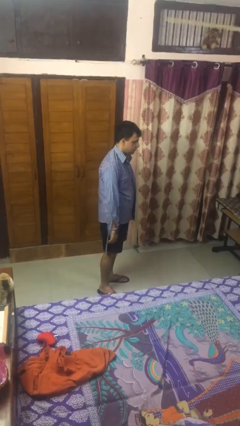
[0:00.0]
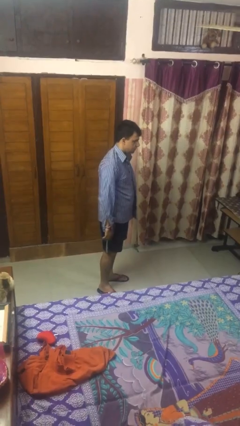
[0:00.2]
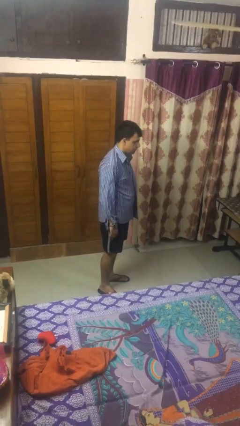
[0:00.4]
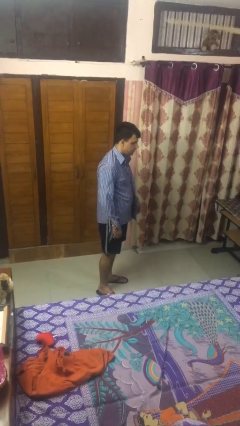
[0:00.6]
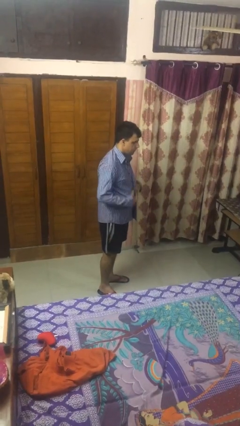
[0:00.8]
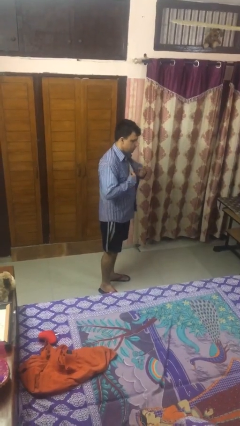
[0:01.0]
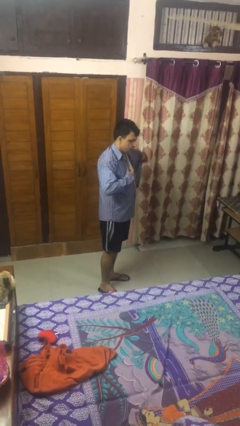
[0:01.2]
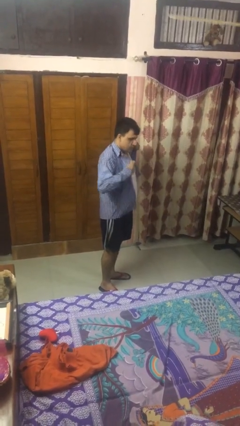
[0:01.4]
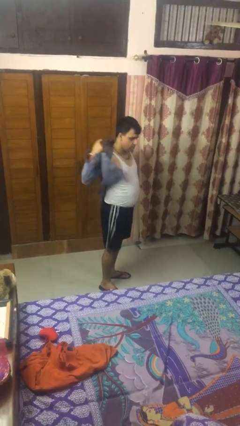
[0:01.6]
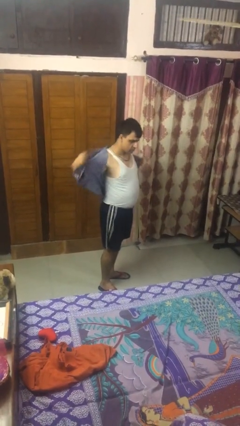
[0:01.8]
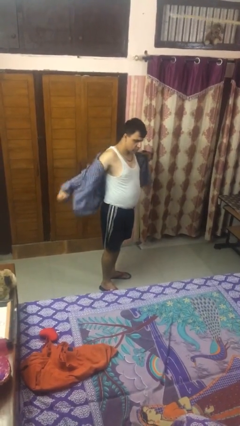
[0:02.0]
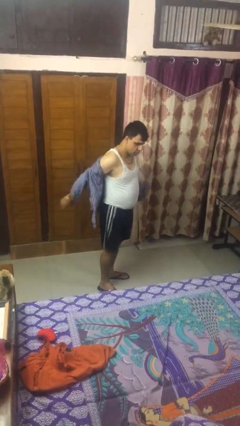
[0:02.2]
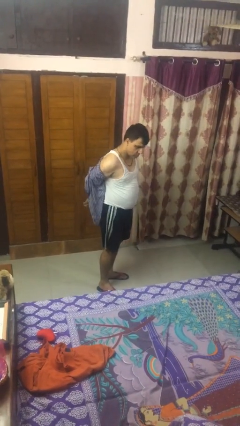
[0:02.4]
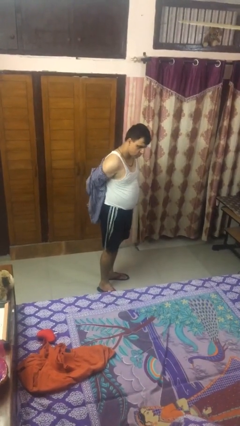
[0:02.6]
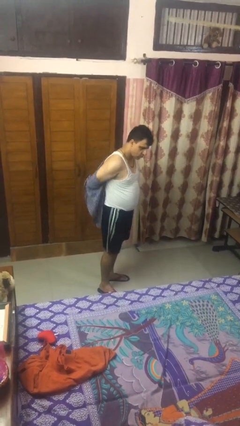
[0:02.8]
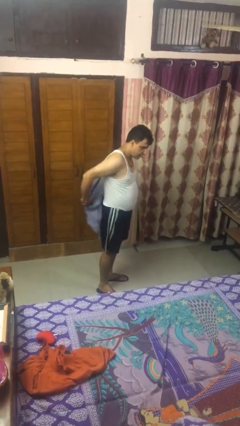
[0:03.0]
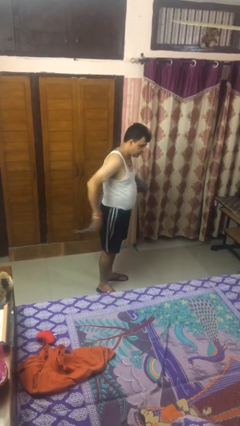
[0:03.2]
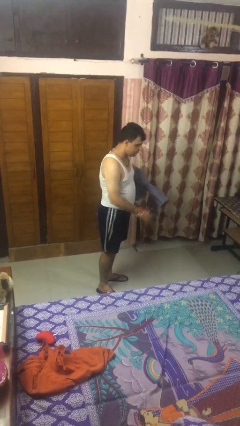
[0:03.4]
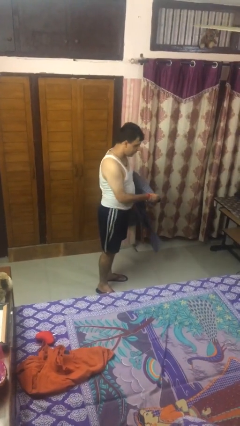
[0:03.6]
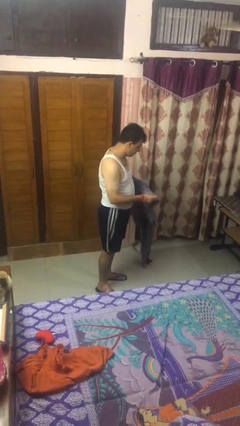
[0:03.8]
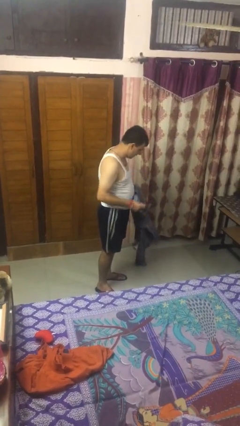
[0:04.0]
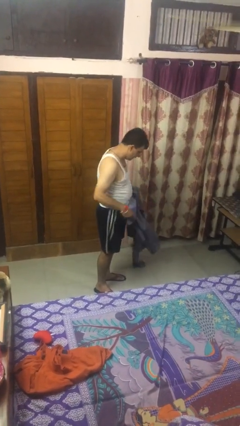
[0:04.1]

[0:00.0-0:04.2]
person takes off shirt

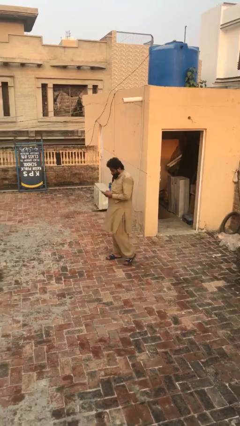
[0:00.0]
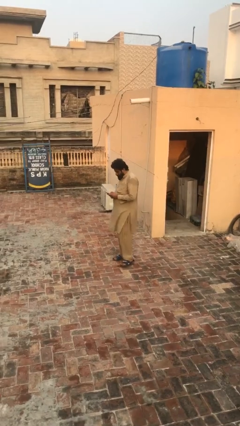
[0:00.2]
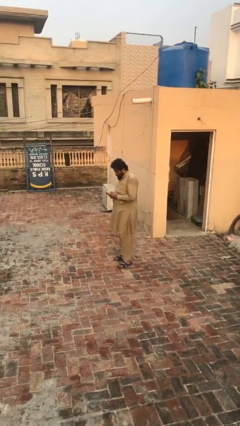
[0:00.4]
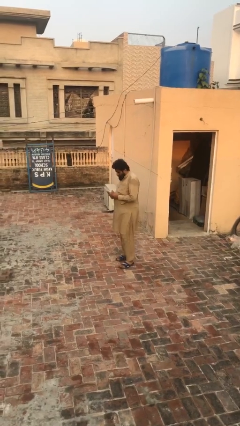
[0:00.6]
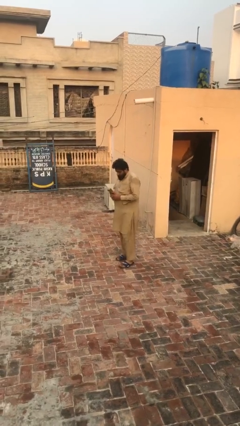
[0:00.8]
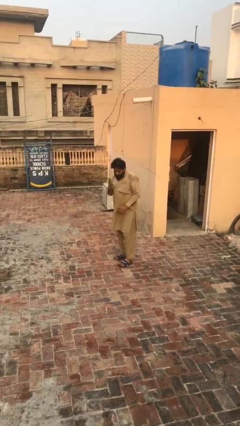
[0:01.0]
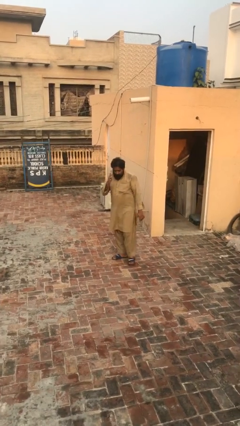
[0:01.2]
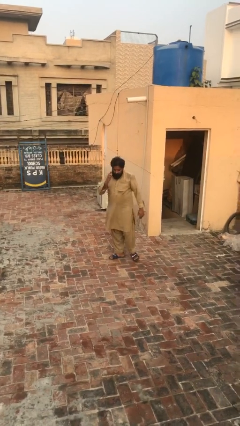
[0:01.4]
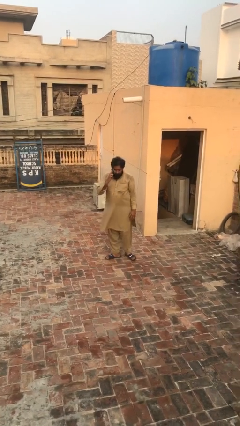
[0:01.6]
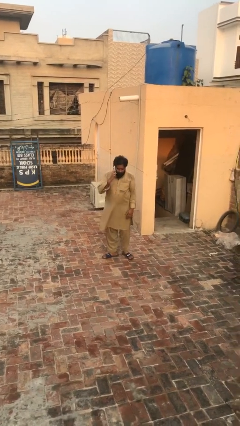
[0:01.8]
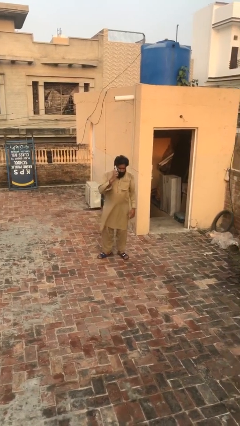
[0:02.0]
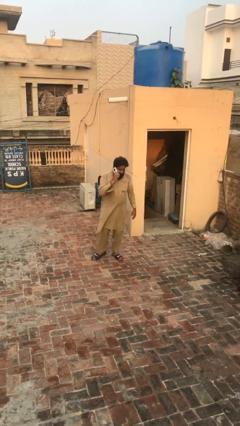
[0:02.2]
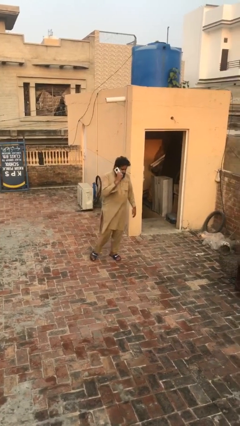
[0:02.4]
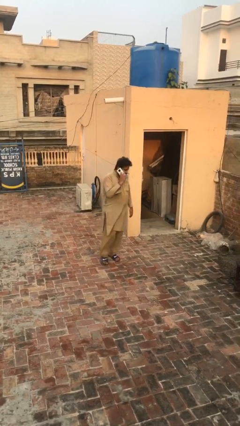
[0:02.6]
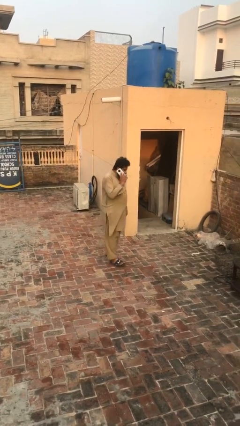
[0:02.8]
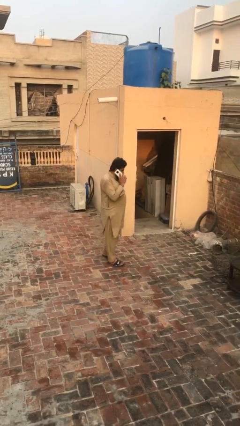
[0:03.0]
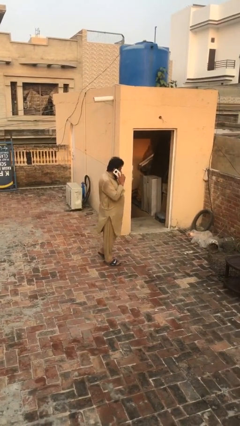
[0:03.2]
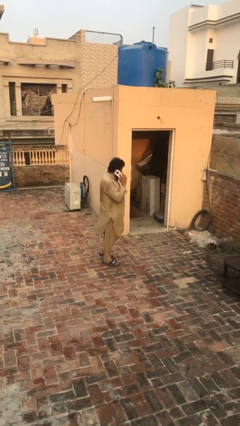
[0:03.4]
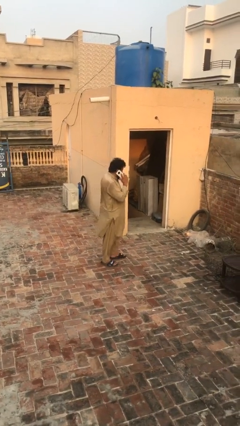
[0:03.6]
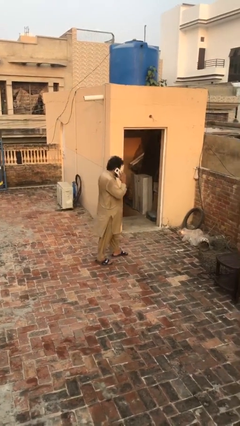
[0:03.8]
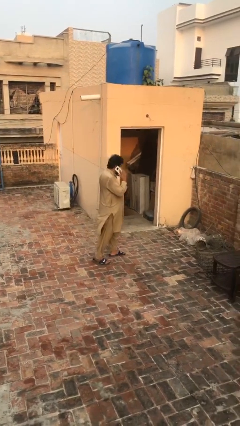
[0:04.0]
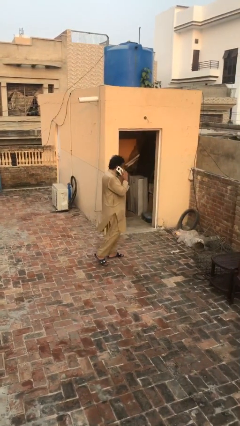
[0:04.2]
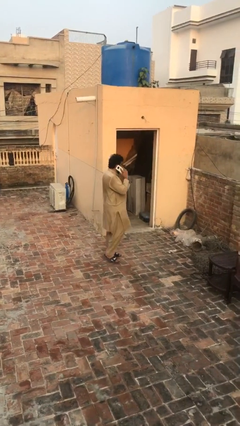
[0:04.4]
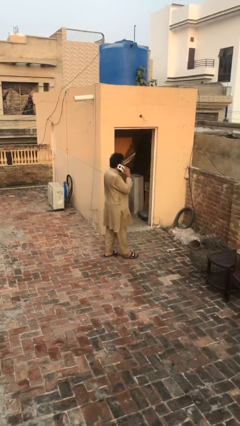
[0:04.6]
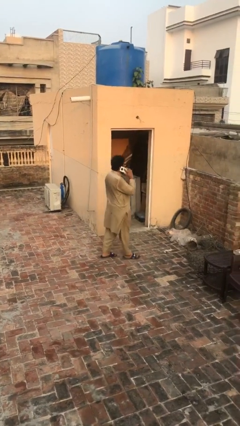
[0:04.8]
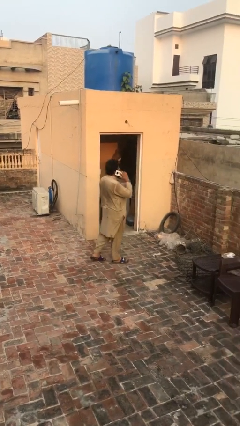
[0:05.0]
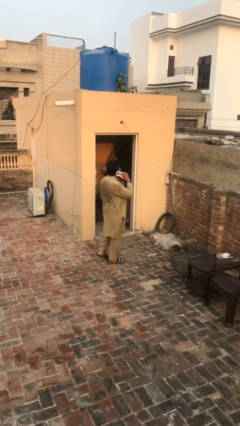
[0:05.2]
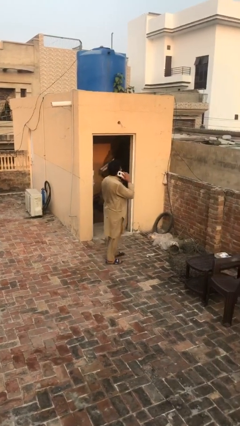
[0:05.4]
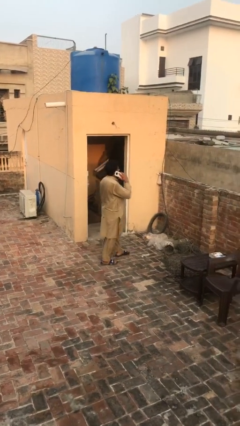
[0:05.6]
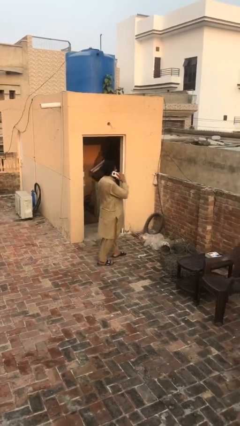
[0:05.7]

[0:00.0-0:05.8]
person talks on phone

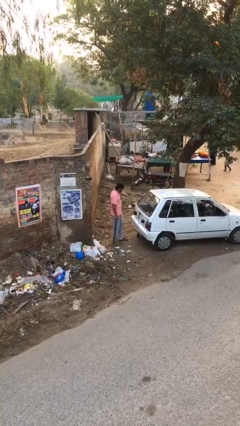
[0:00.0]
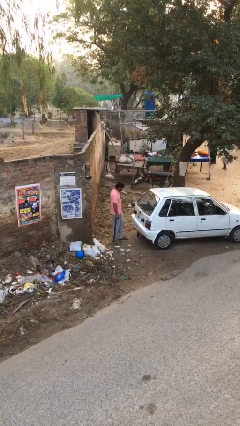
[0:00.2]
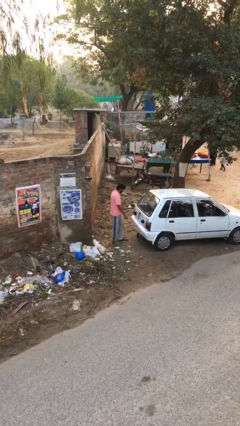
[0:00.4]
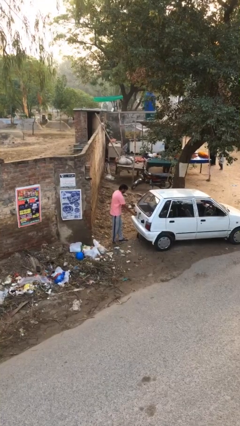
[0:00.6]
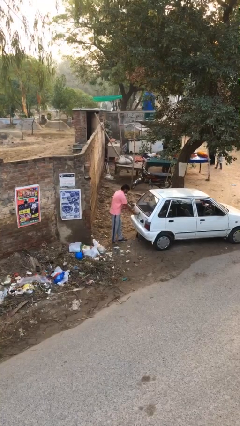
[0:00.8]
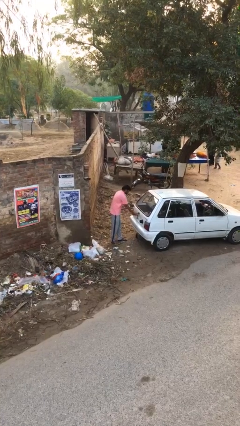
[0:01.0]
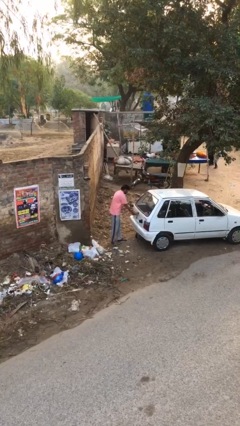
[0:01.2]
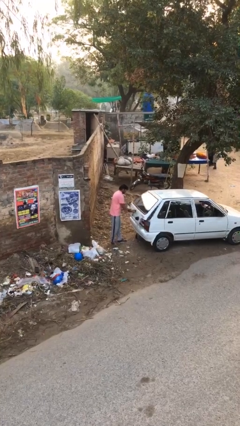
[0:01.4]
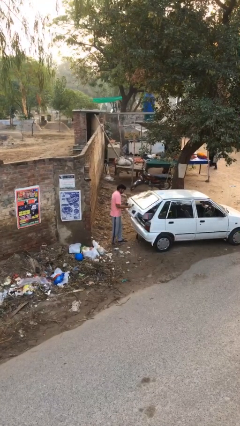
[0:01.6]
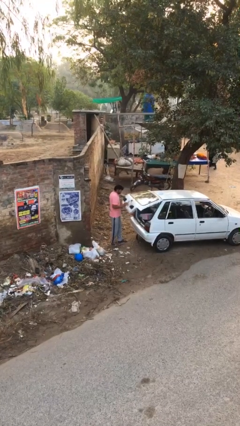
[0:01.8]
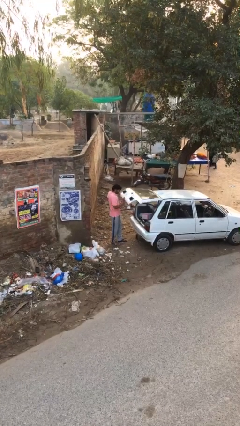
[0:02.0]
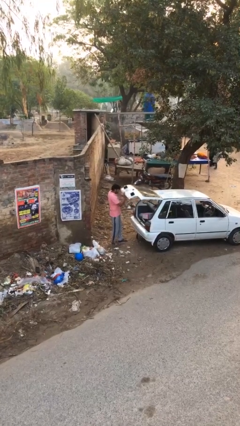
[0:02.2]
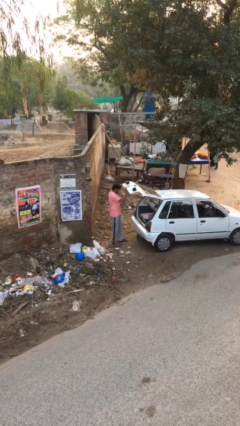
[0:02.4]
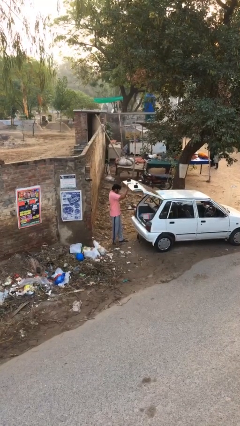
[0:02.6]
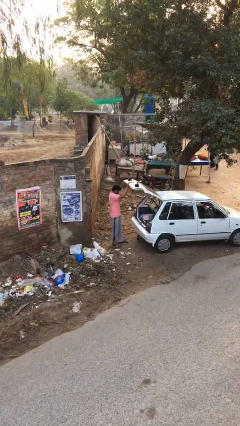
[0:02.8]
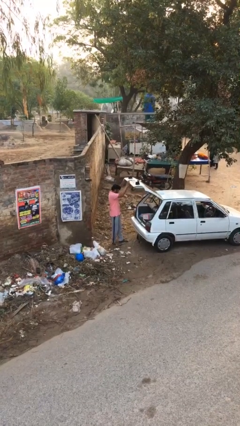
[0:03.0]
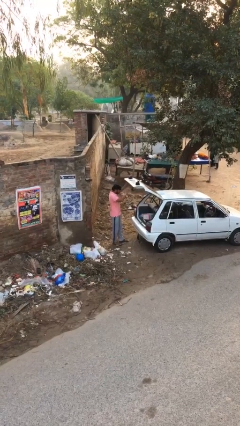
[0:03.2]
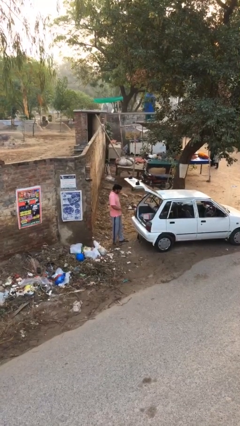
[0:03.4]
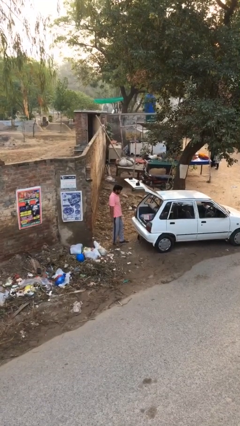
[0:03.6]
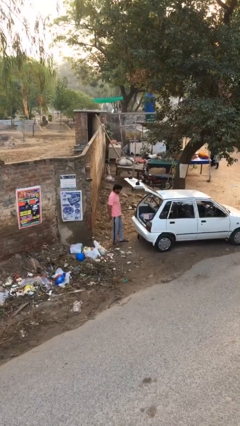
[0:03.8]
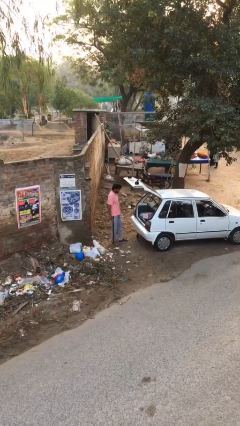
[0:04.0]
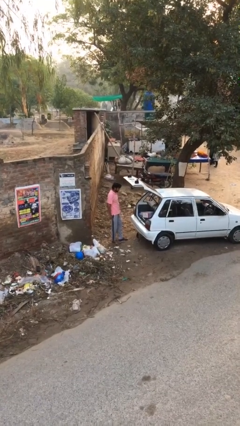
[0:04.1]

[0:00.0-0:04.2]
person opens car trunk

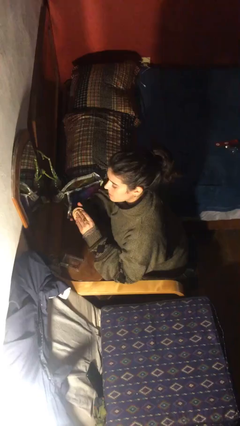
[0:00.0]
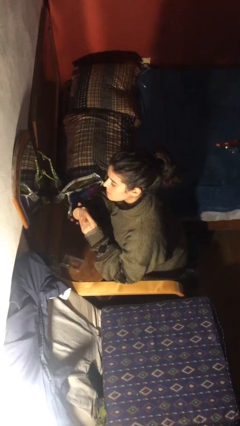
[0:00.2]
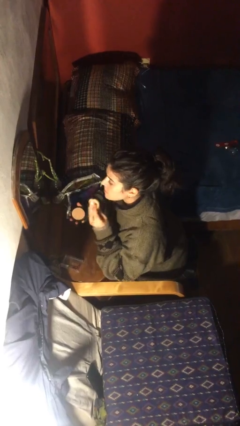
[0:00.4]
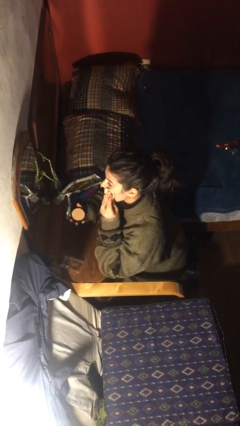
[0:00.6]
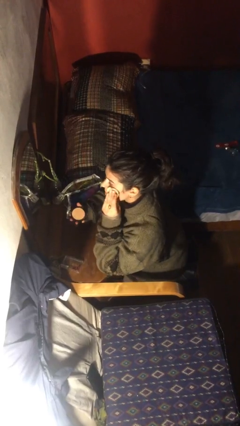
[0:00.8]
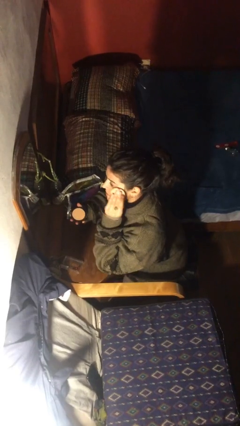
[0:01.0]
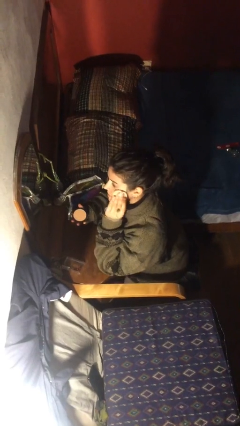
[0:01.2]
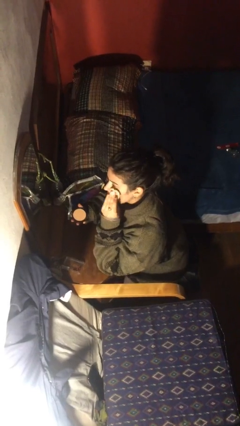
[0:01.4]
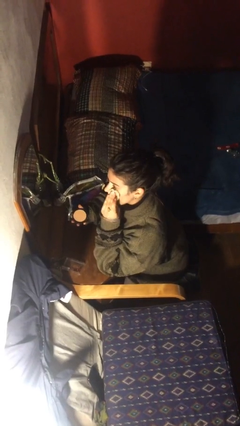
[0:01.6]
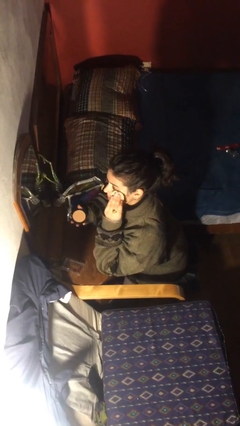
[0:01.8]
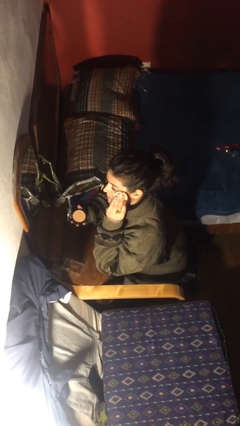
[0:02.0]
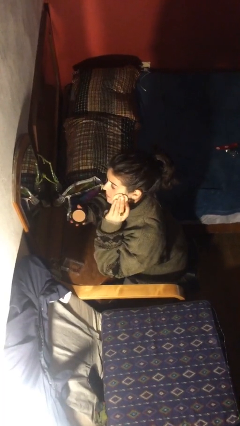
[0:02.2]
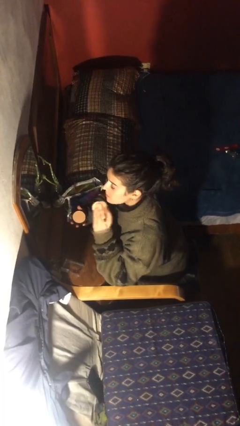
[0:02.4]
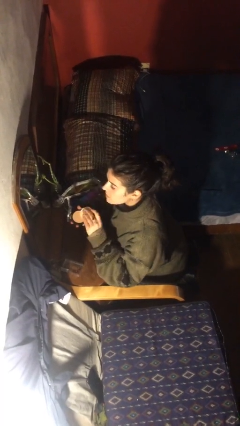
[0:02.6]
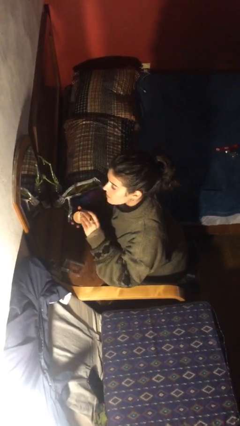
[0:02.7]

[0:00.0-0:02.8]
person applies foundation makeup

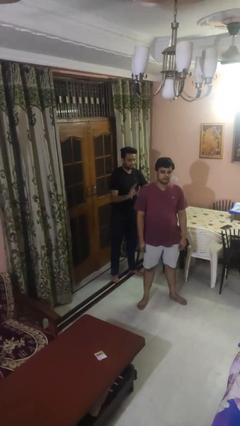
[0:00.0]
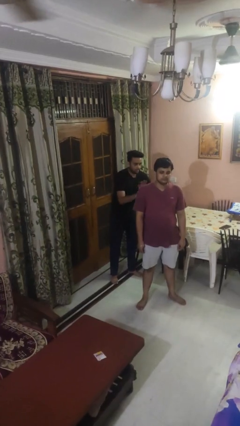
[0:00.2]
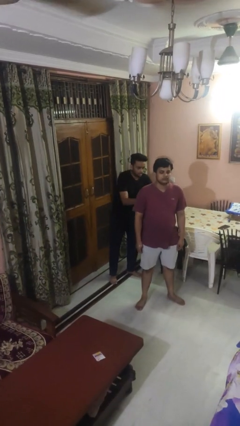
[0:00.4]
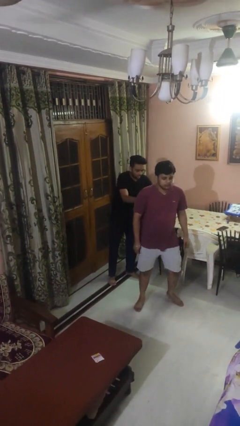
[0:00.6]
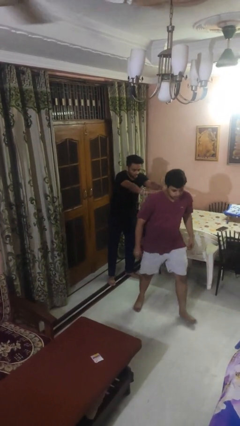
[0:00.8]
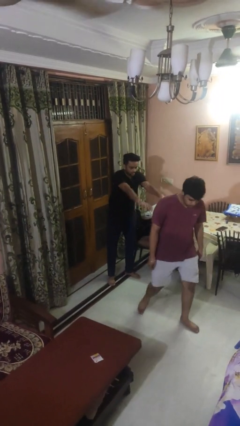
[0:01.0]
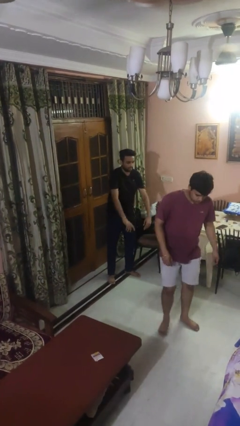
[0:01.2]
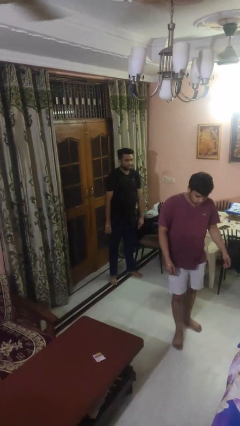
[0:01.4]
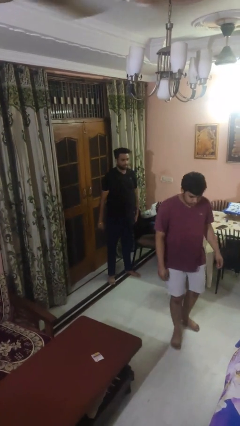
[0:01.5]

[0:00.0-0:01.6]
person shoves person
